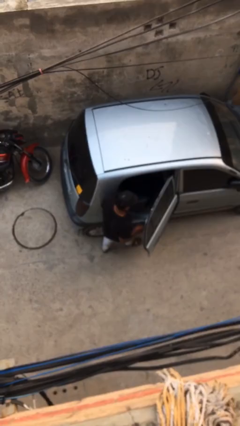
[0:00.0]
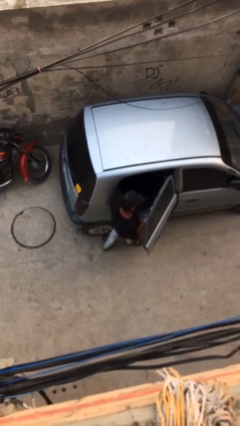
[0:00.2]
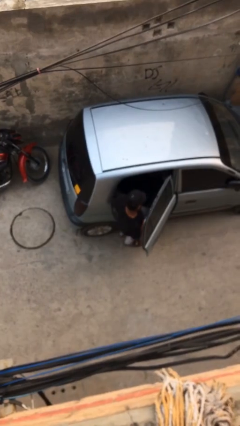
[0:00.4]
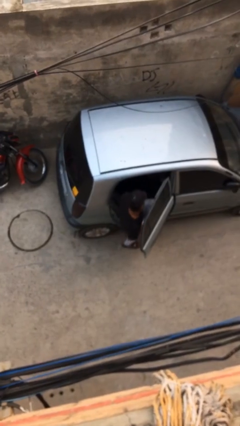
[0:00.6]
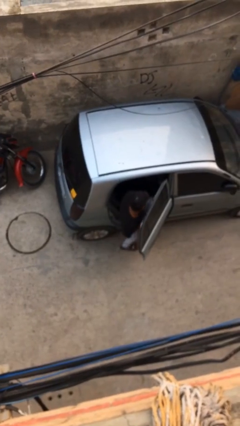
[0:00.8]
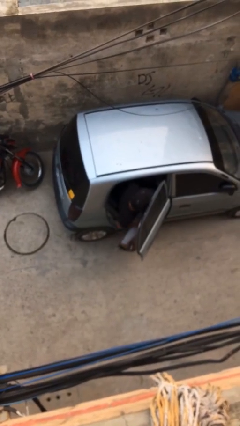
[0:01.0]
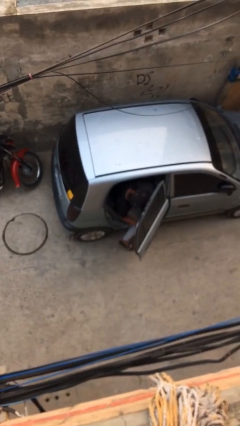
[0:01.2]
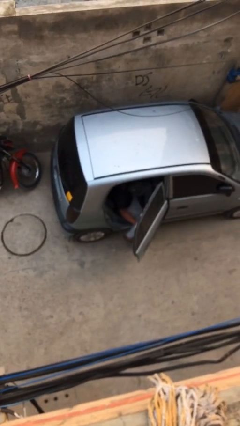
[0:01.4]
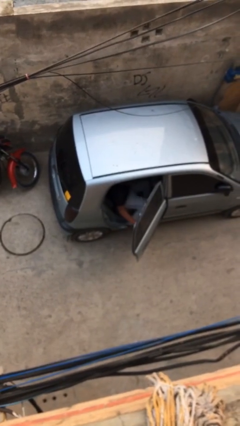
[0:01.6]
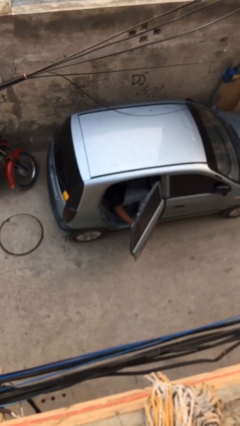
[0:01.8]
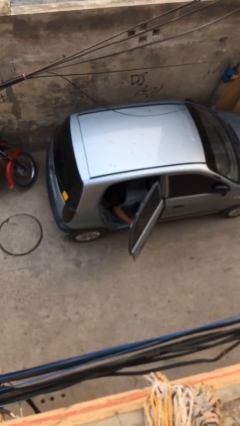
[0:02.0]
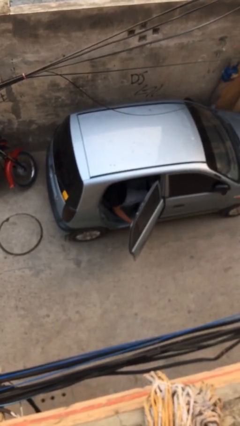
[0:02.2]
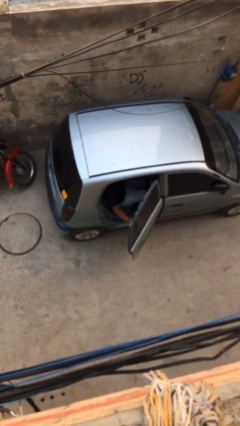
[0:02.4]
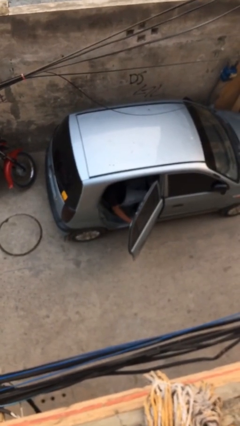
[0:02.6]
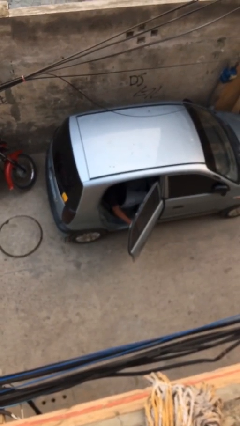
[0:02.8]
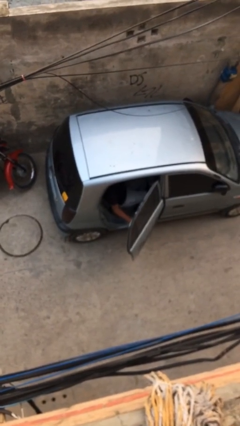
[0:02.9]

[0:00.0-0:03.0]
person enters car

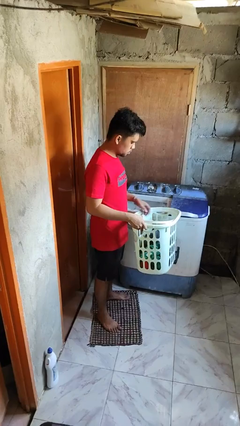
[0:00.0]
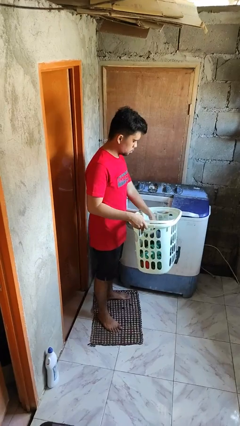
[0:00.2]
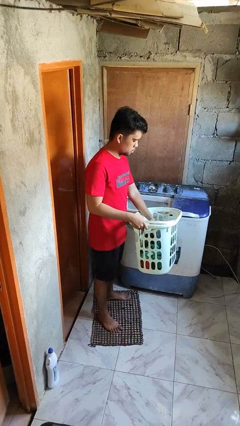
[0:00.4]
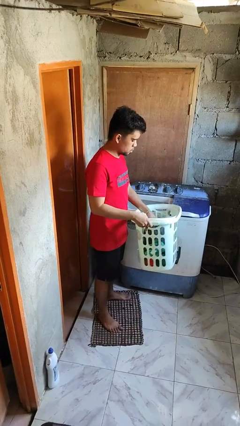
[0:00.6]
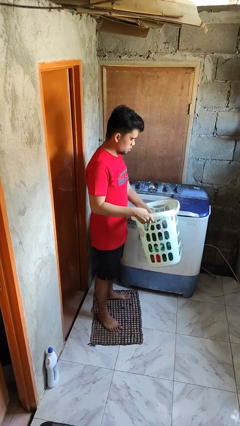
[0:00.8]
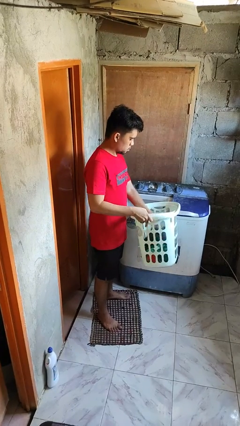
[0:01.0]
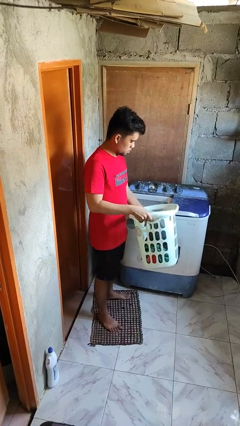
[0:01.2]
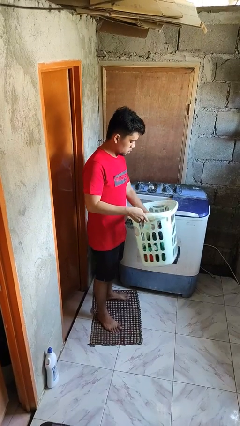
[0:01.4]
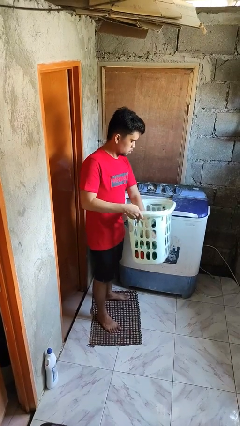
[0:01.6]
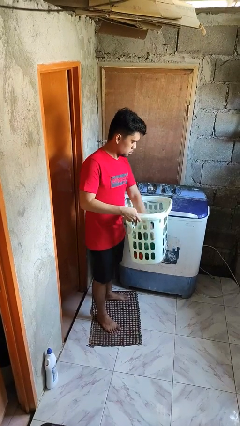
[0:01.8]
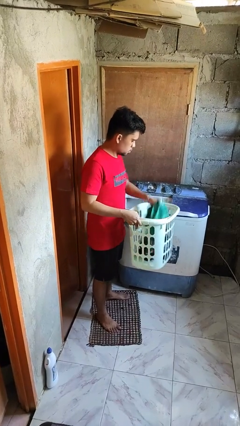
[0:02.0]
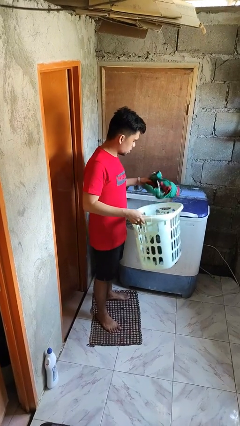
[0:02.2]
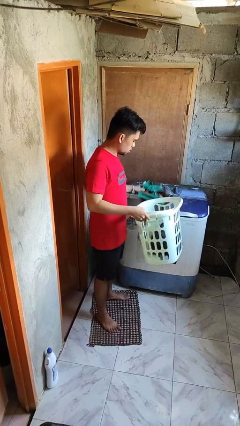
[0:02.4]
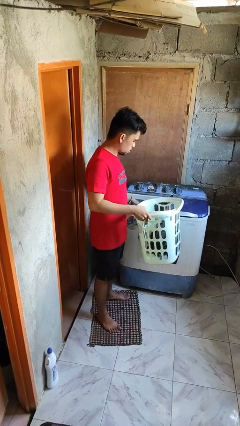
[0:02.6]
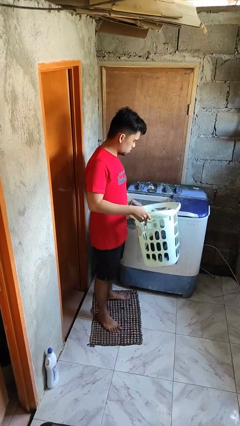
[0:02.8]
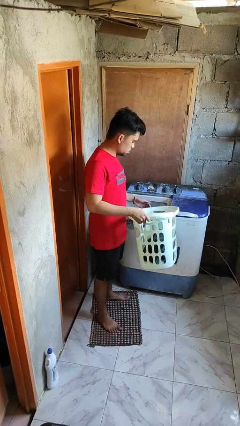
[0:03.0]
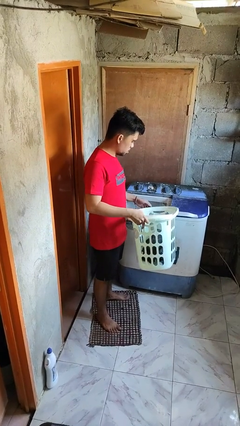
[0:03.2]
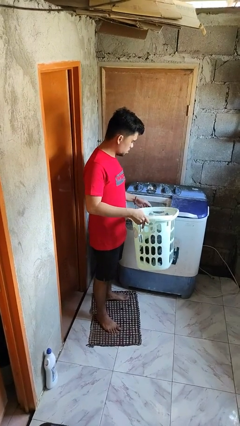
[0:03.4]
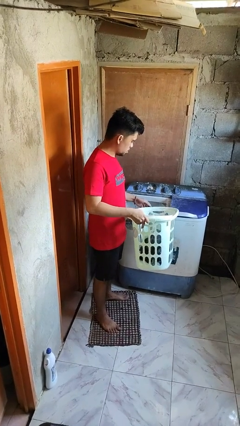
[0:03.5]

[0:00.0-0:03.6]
person loads clotheswasher

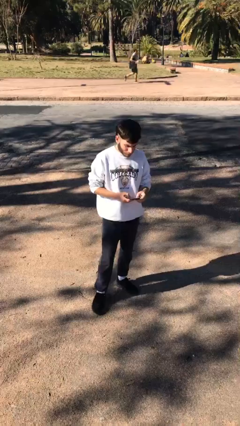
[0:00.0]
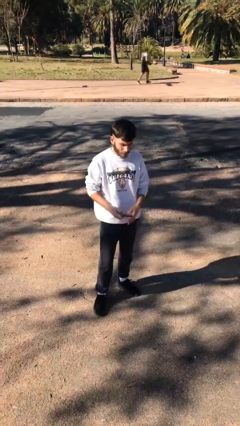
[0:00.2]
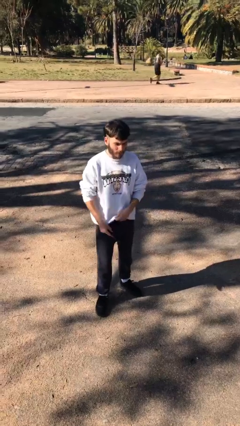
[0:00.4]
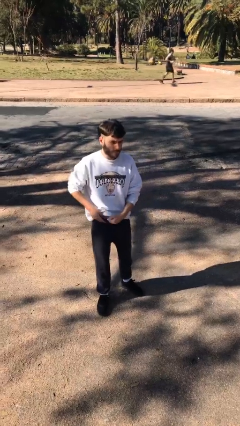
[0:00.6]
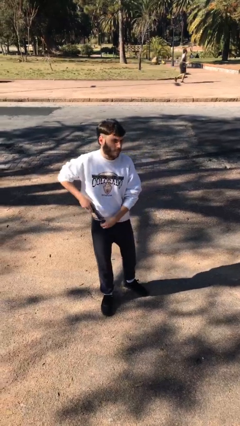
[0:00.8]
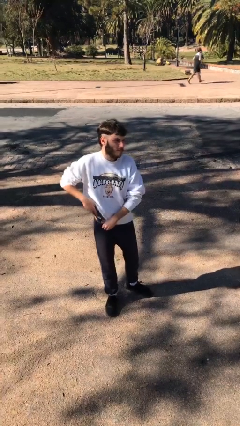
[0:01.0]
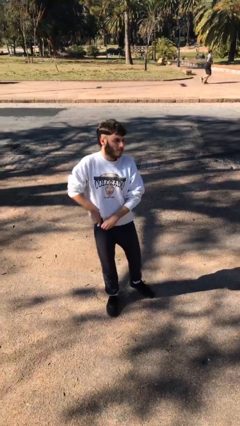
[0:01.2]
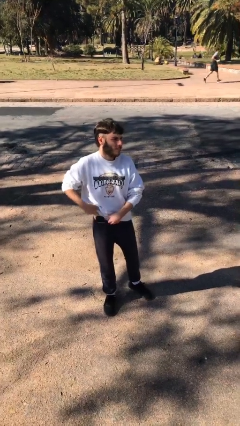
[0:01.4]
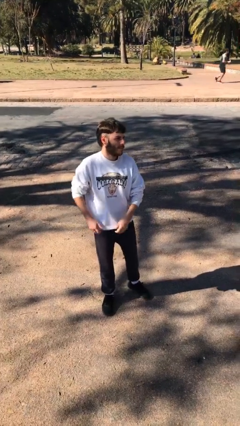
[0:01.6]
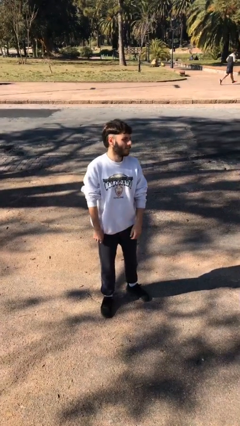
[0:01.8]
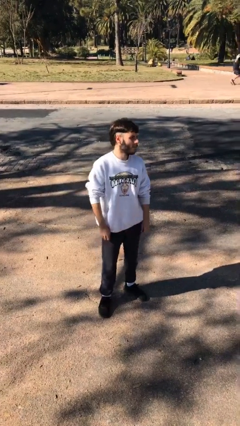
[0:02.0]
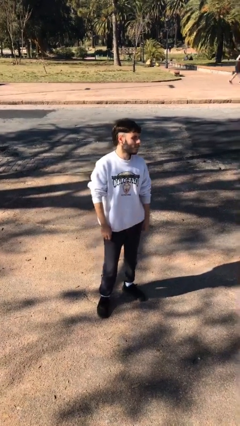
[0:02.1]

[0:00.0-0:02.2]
person puts phone into pocket

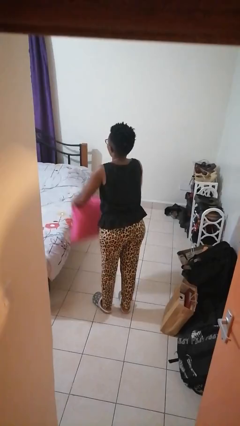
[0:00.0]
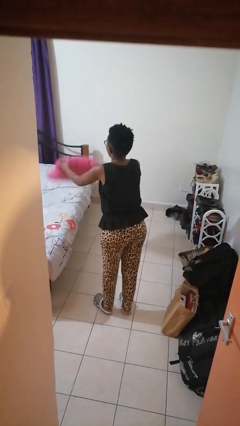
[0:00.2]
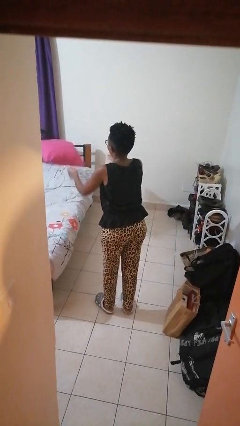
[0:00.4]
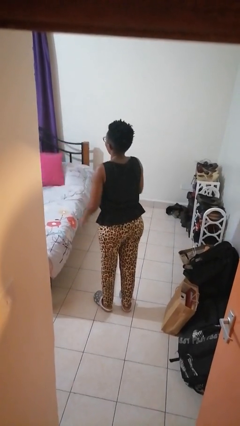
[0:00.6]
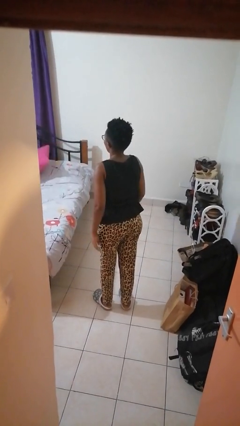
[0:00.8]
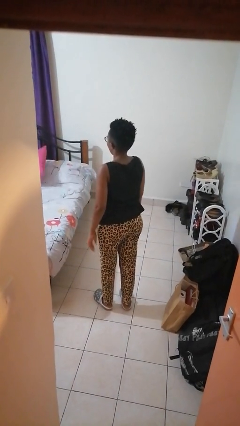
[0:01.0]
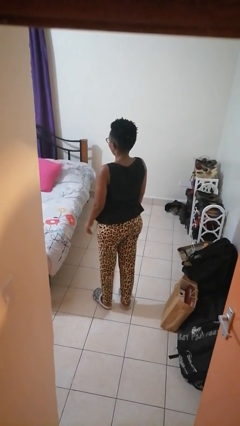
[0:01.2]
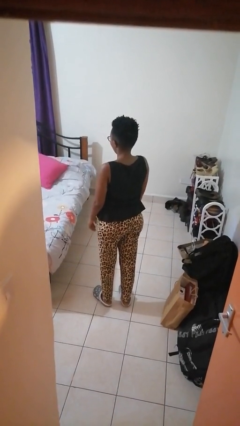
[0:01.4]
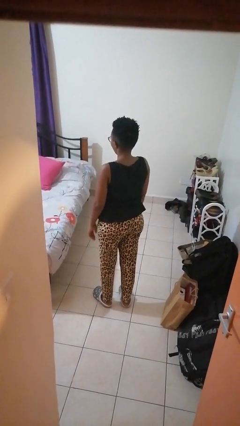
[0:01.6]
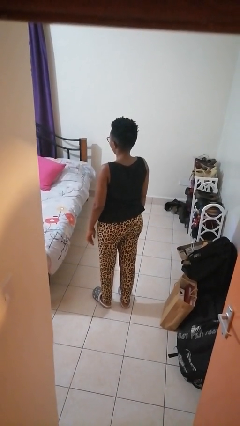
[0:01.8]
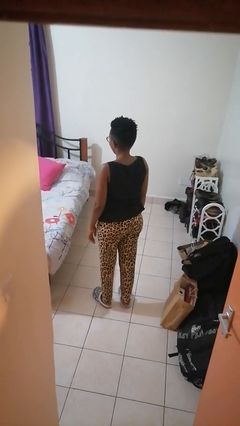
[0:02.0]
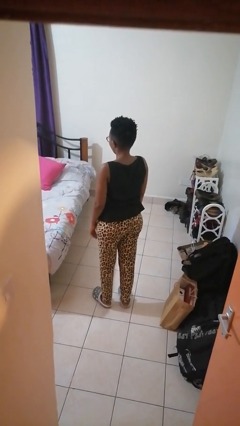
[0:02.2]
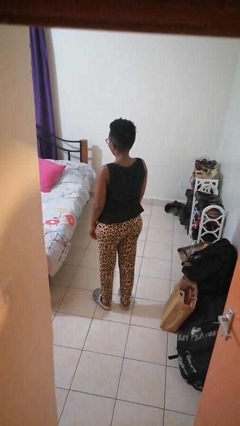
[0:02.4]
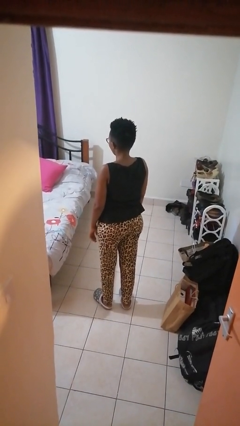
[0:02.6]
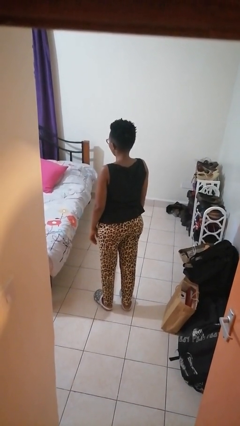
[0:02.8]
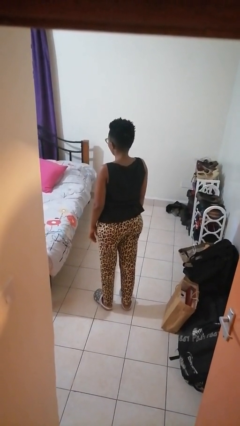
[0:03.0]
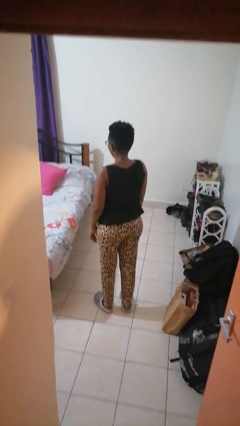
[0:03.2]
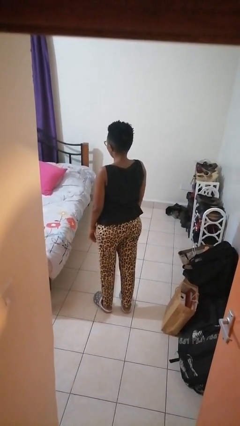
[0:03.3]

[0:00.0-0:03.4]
person throws object on bed

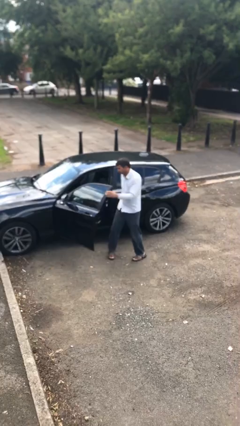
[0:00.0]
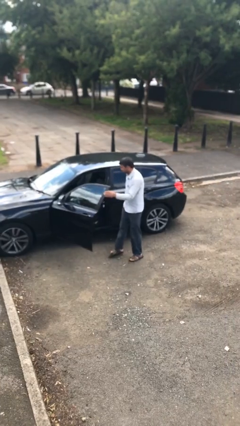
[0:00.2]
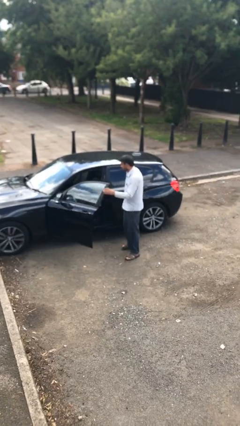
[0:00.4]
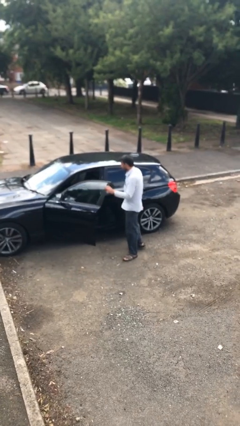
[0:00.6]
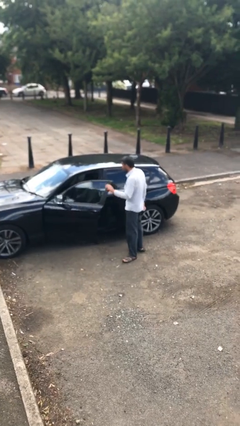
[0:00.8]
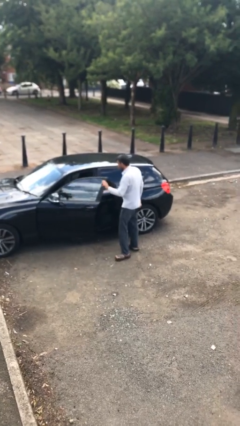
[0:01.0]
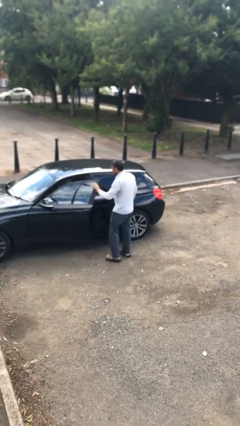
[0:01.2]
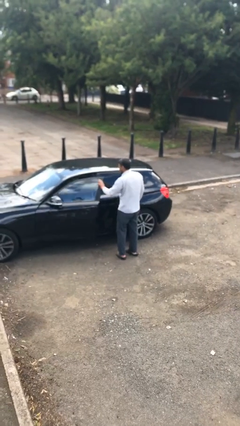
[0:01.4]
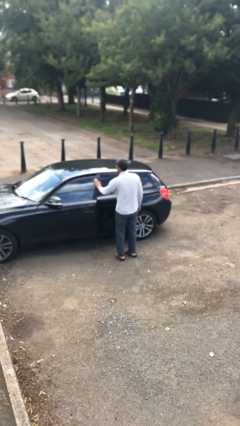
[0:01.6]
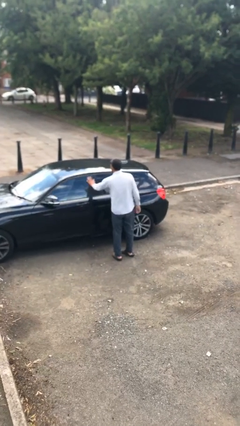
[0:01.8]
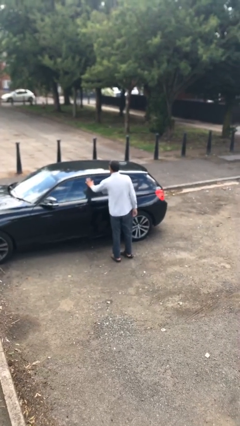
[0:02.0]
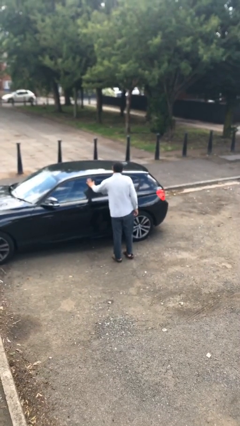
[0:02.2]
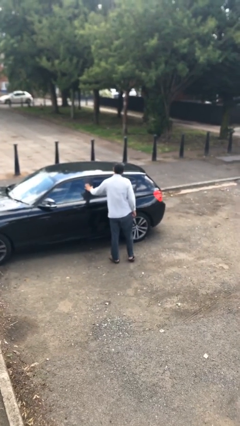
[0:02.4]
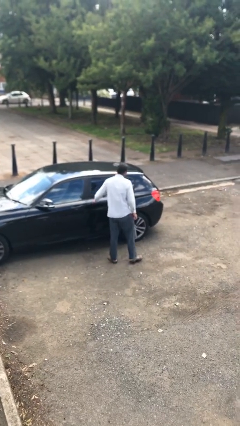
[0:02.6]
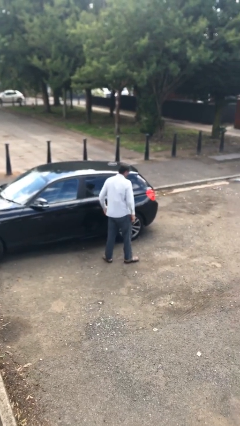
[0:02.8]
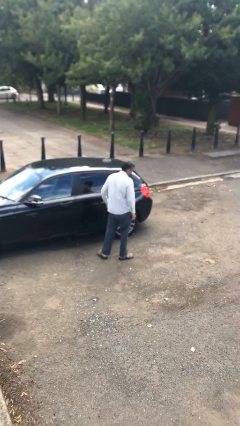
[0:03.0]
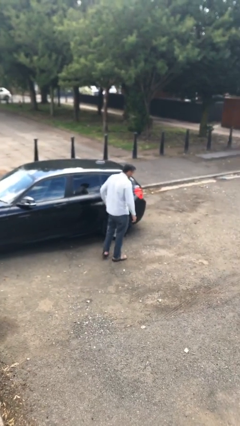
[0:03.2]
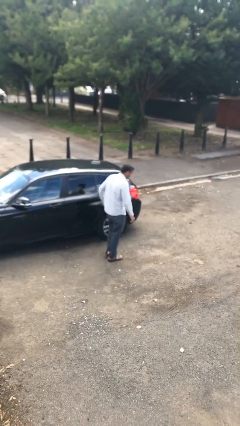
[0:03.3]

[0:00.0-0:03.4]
person closes car door

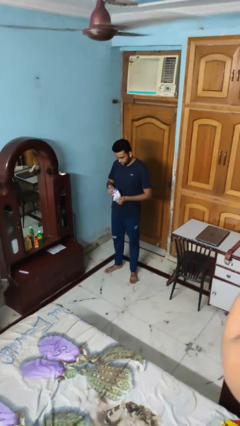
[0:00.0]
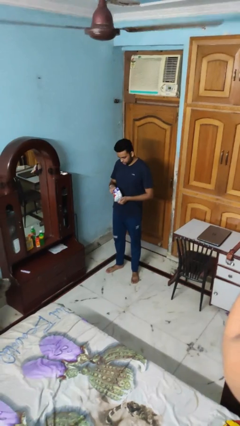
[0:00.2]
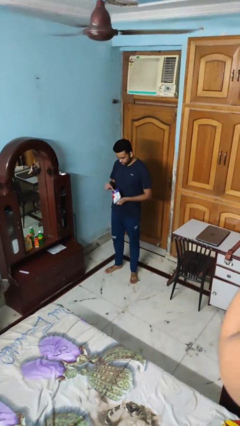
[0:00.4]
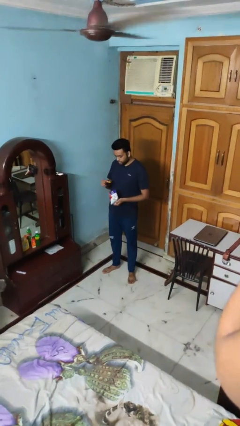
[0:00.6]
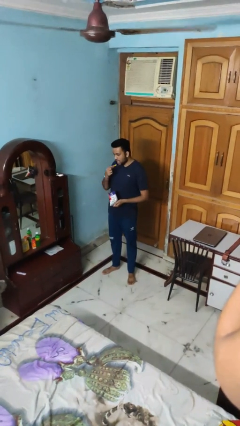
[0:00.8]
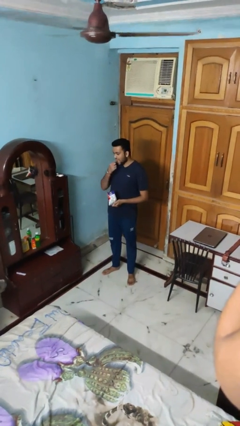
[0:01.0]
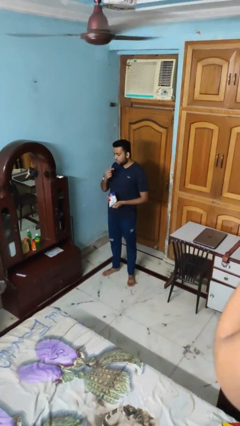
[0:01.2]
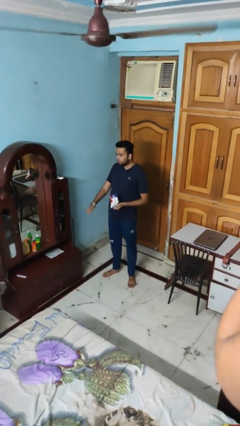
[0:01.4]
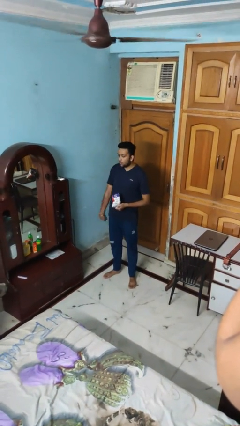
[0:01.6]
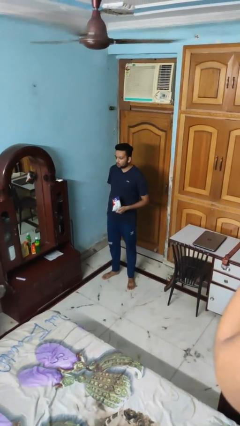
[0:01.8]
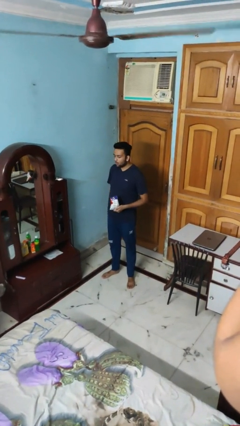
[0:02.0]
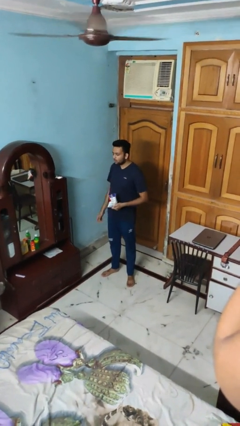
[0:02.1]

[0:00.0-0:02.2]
person eats snack from bag
